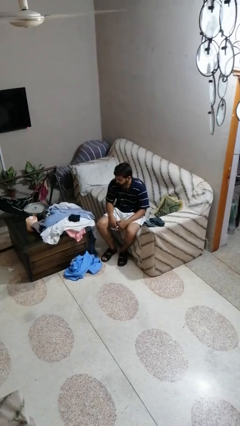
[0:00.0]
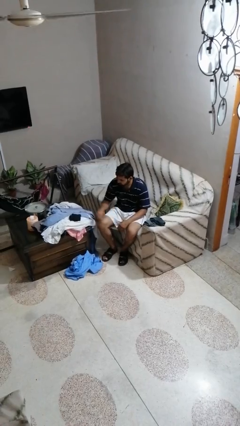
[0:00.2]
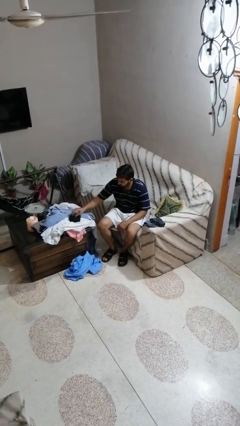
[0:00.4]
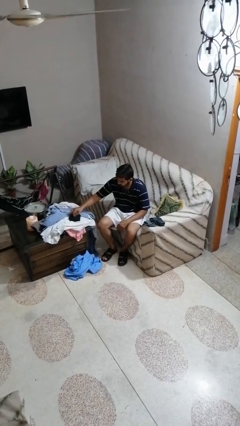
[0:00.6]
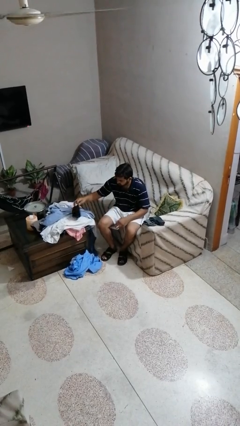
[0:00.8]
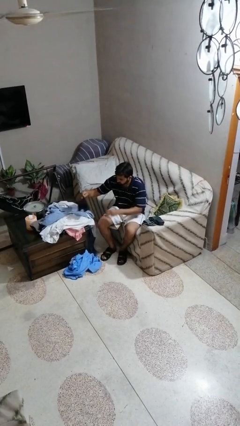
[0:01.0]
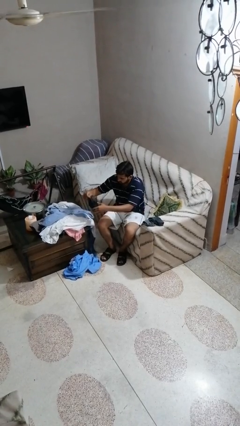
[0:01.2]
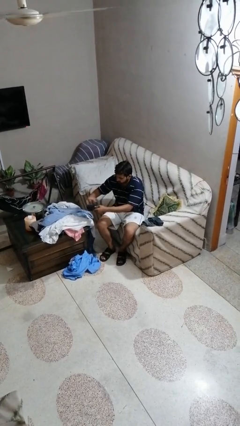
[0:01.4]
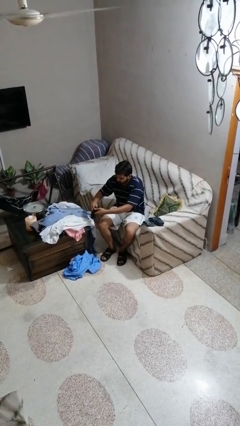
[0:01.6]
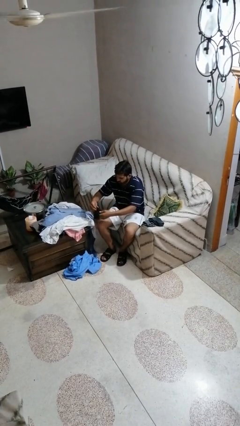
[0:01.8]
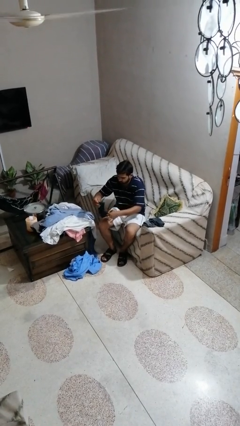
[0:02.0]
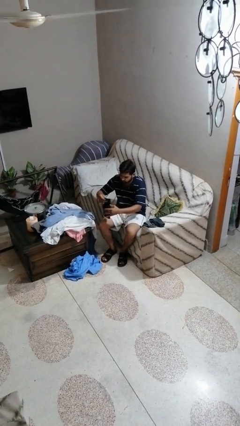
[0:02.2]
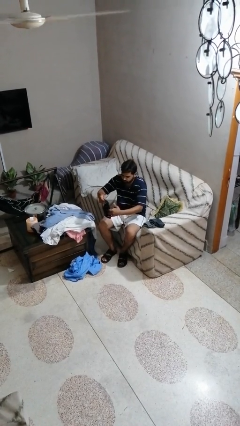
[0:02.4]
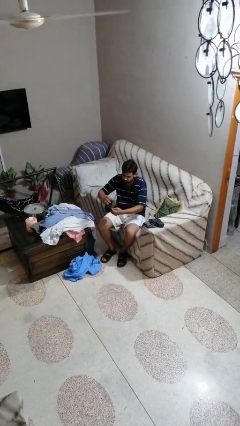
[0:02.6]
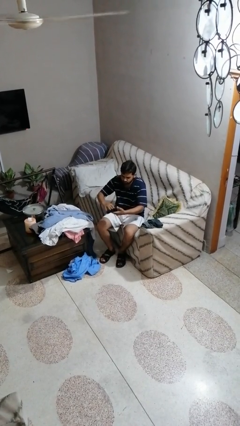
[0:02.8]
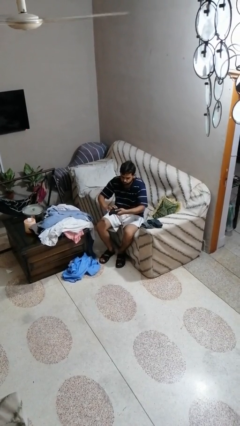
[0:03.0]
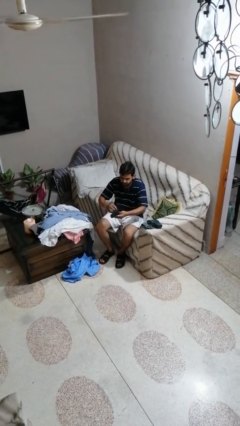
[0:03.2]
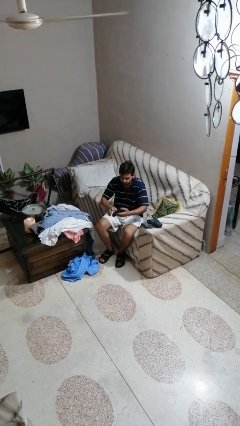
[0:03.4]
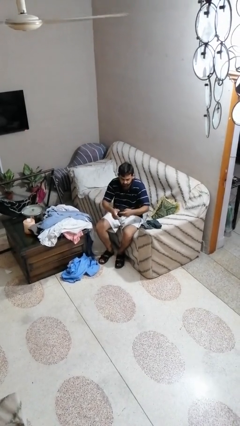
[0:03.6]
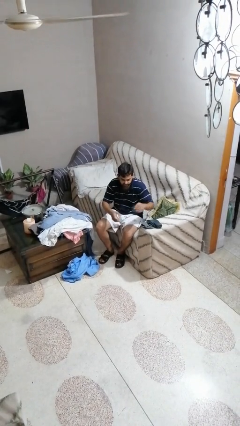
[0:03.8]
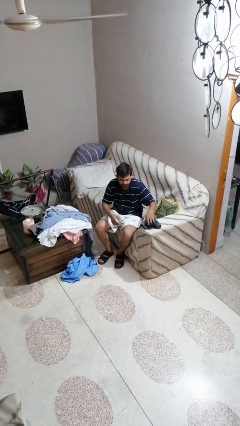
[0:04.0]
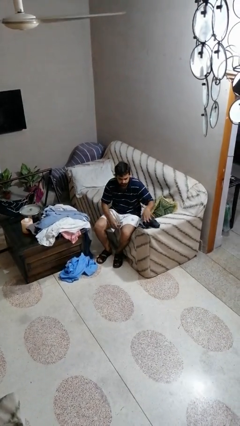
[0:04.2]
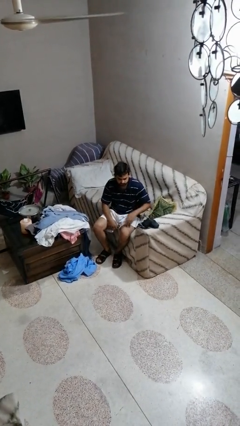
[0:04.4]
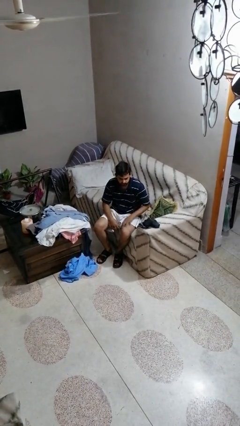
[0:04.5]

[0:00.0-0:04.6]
person folds socks

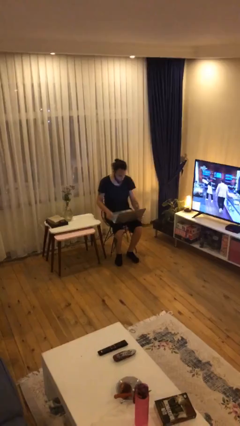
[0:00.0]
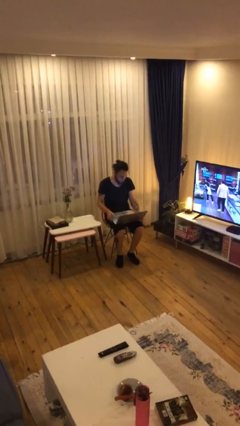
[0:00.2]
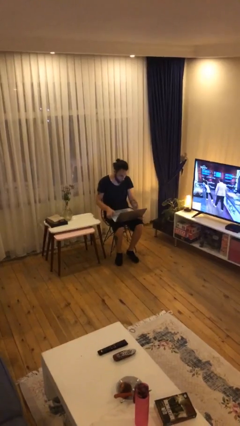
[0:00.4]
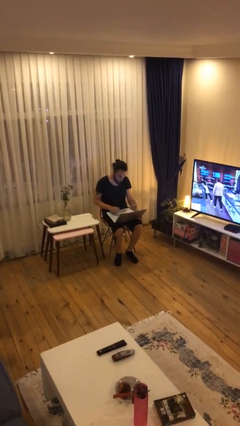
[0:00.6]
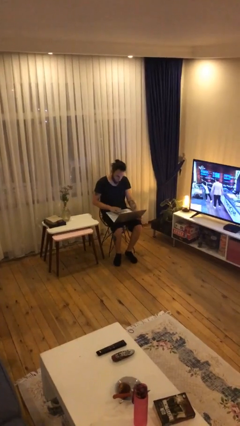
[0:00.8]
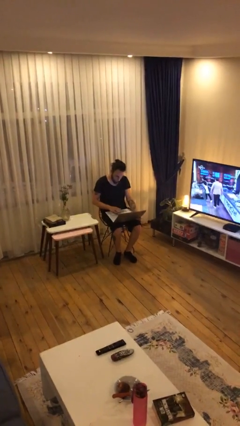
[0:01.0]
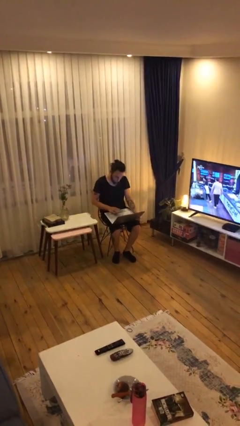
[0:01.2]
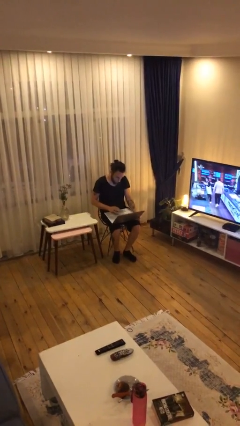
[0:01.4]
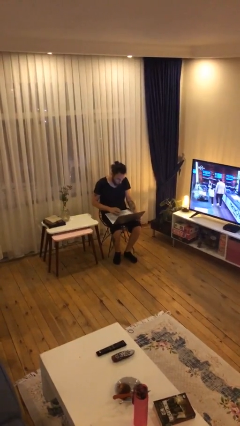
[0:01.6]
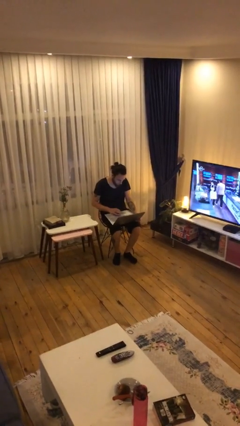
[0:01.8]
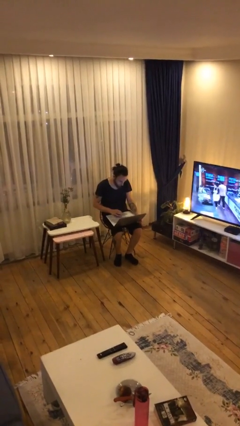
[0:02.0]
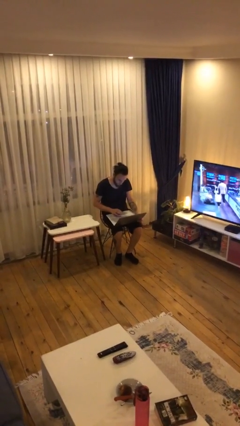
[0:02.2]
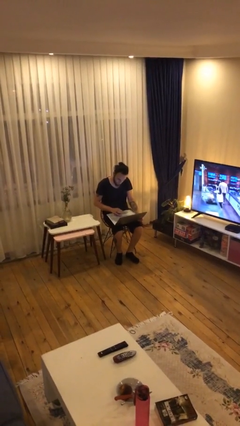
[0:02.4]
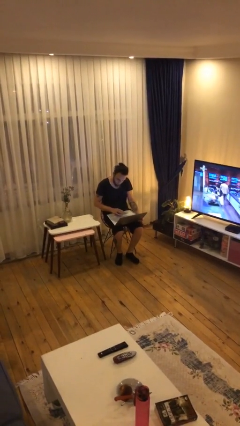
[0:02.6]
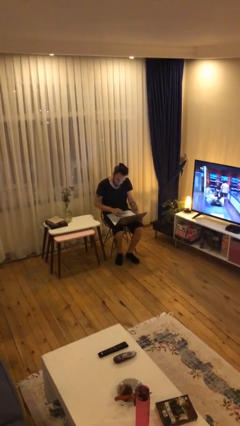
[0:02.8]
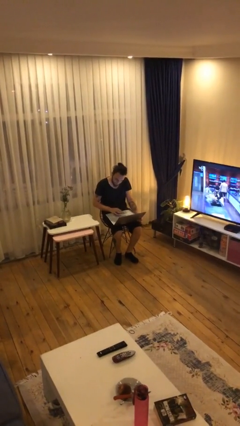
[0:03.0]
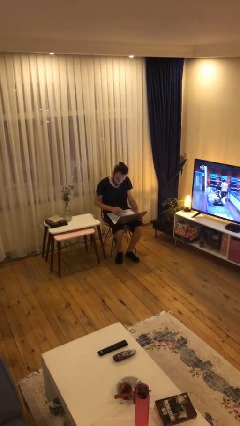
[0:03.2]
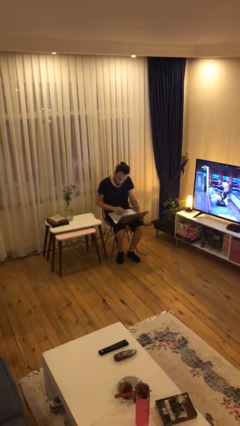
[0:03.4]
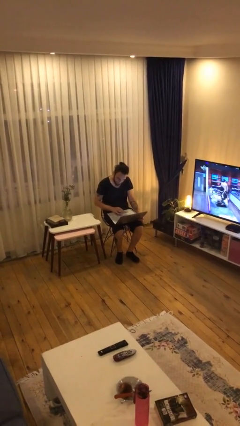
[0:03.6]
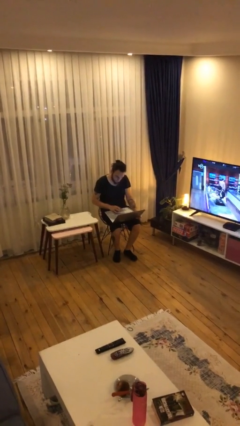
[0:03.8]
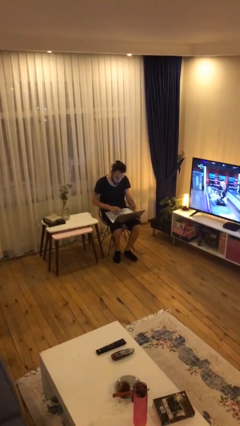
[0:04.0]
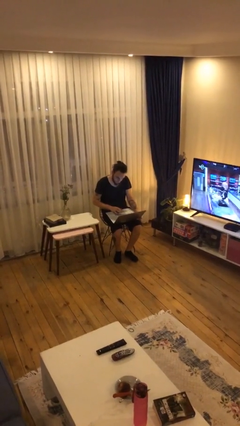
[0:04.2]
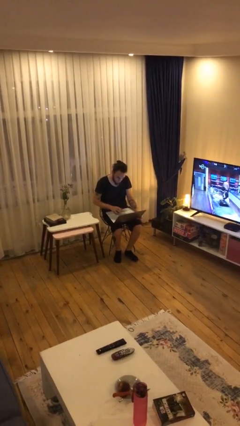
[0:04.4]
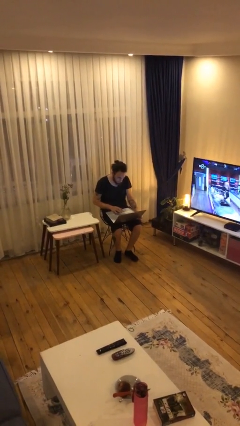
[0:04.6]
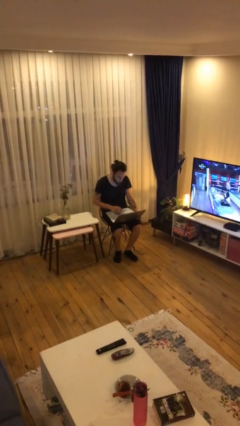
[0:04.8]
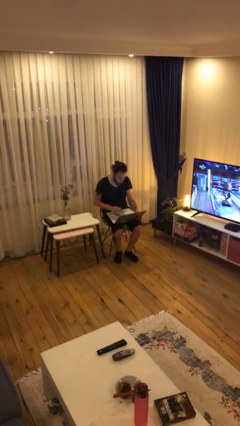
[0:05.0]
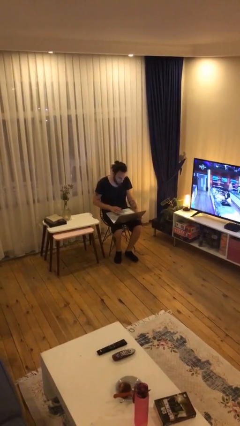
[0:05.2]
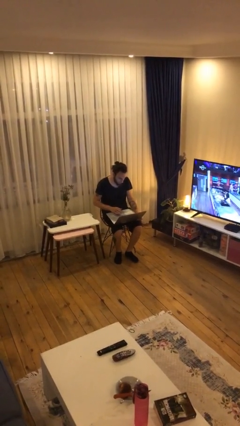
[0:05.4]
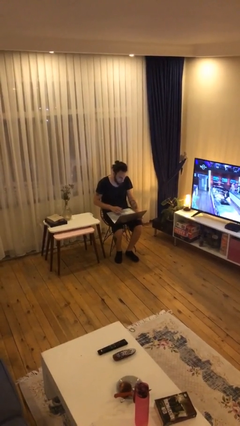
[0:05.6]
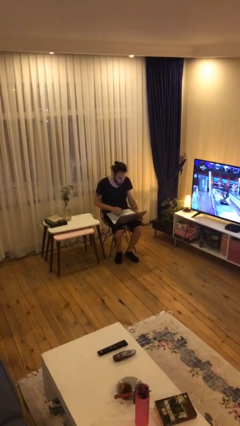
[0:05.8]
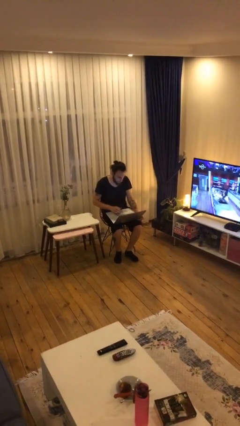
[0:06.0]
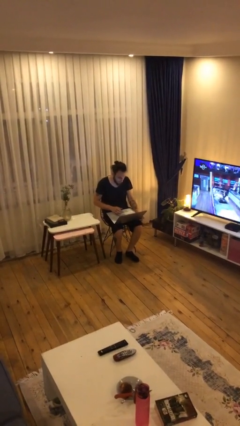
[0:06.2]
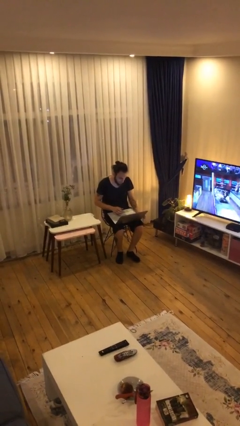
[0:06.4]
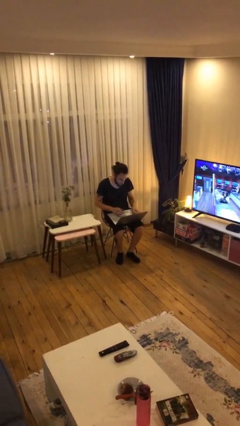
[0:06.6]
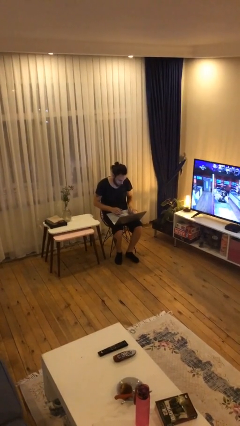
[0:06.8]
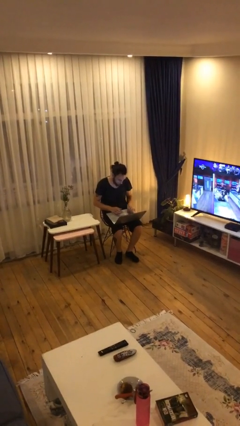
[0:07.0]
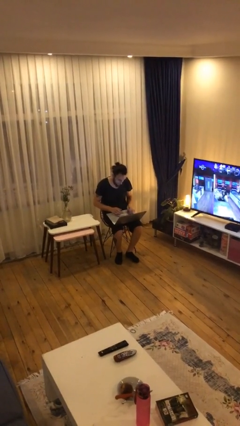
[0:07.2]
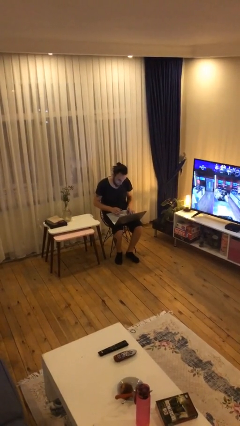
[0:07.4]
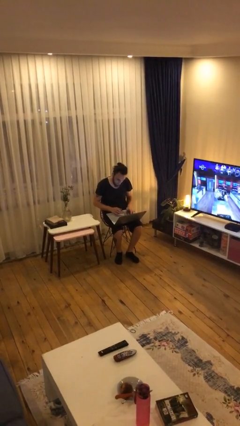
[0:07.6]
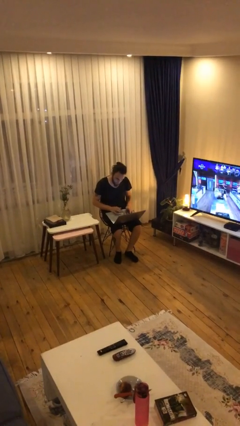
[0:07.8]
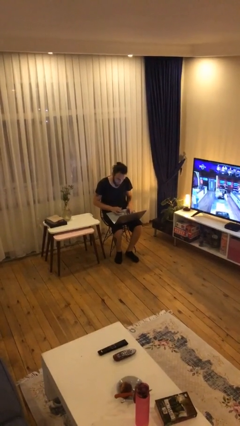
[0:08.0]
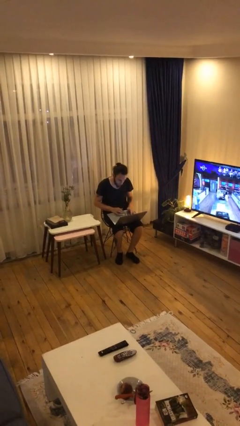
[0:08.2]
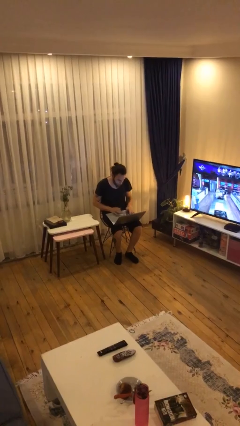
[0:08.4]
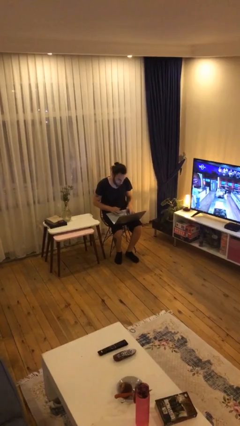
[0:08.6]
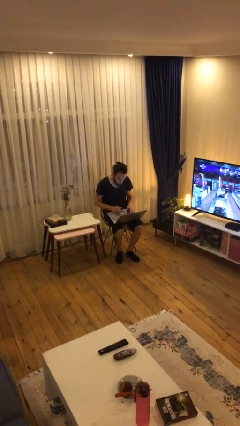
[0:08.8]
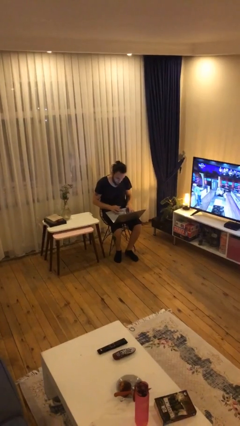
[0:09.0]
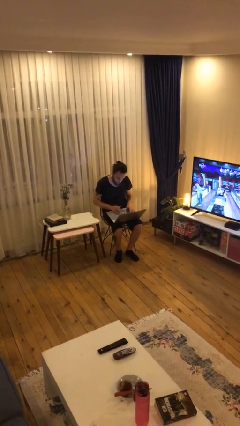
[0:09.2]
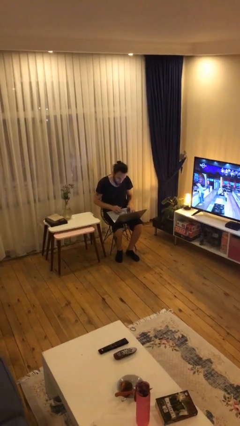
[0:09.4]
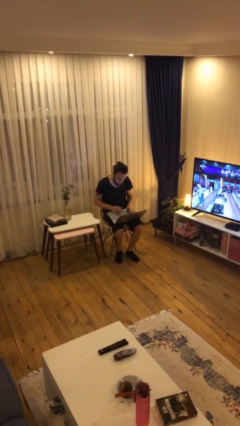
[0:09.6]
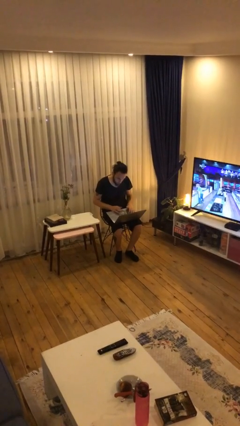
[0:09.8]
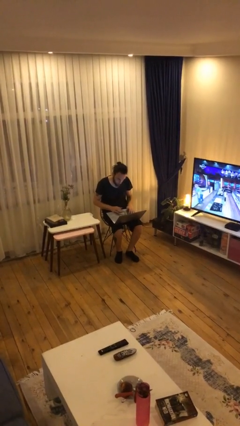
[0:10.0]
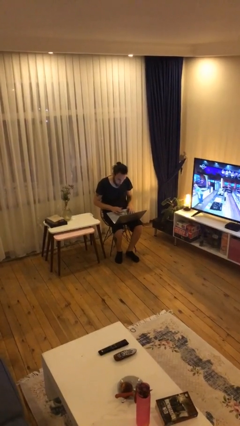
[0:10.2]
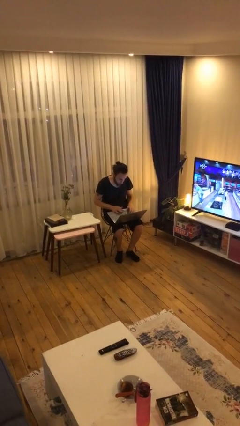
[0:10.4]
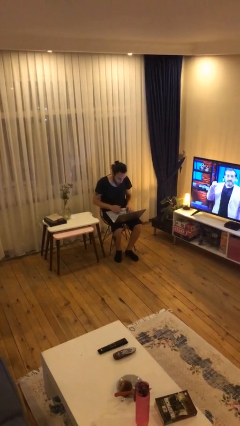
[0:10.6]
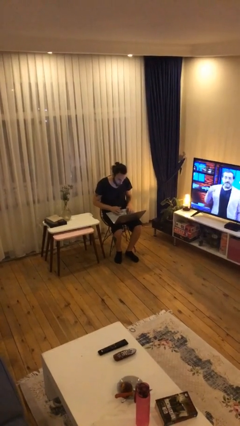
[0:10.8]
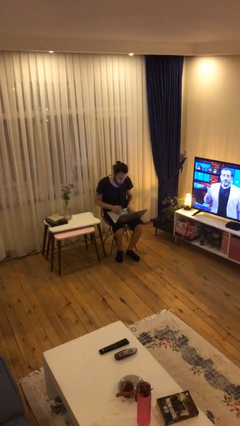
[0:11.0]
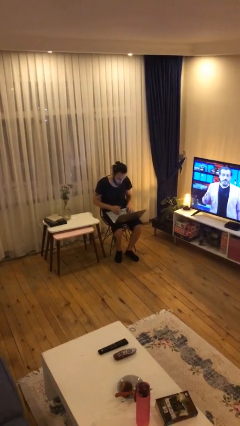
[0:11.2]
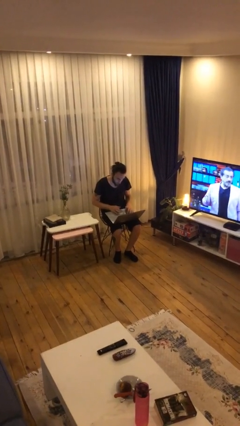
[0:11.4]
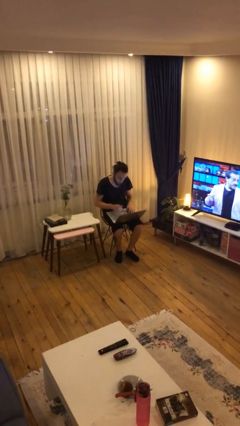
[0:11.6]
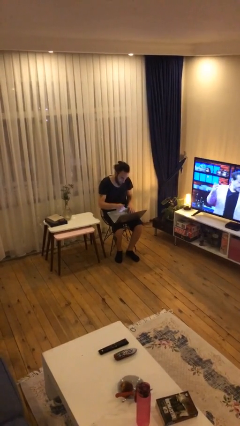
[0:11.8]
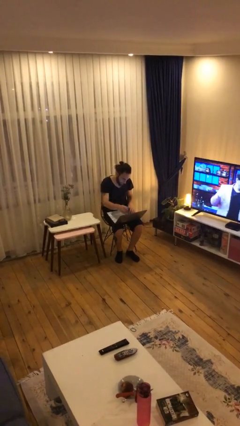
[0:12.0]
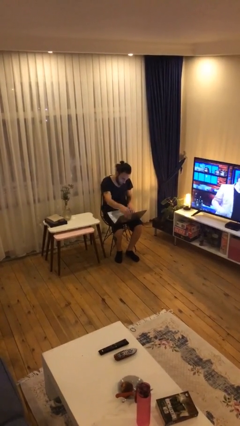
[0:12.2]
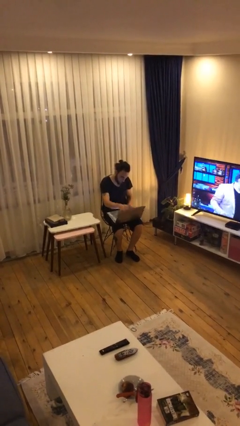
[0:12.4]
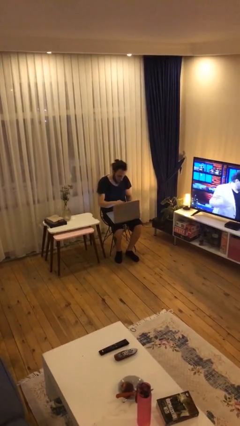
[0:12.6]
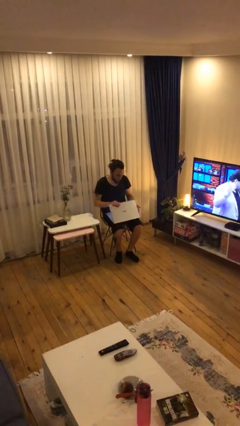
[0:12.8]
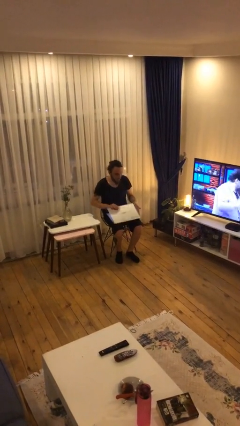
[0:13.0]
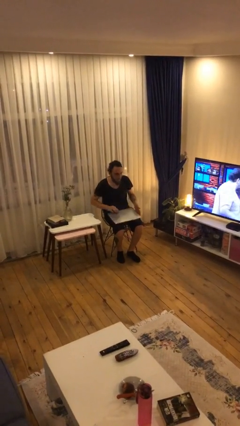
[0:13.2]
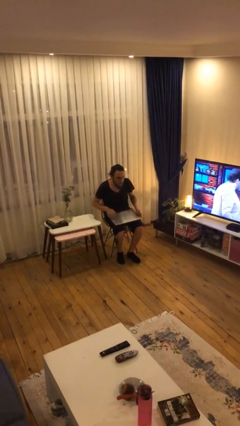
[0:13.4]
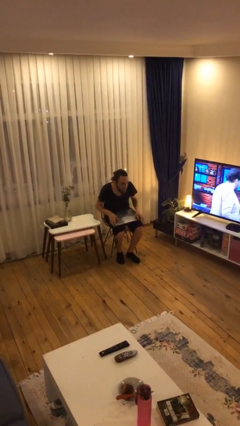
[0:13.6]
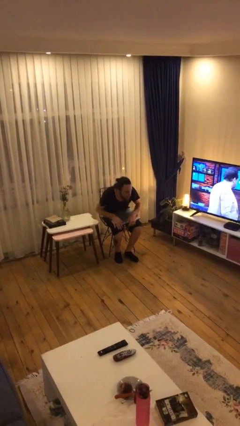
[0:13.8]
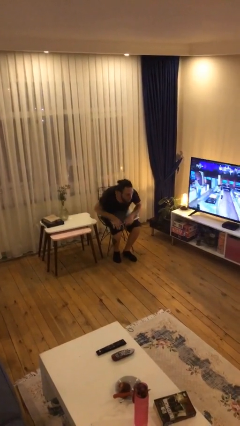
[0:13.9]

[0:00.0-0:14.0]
person interacts with laptop
